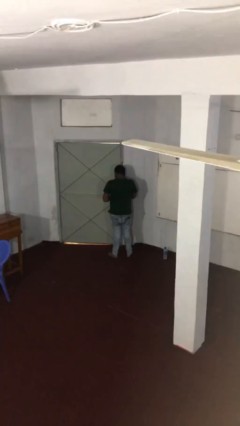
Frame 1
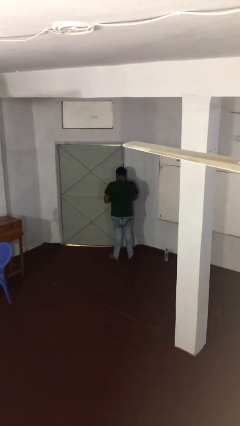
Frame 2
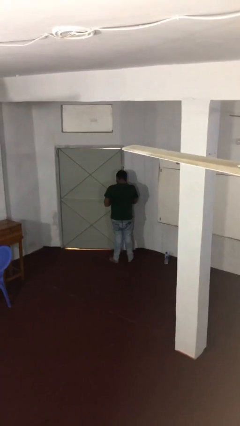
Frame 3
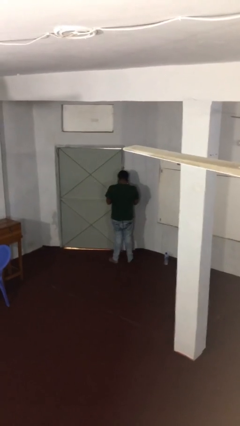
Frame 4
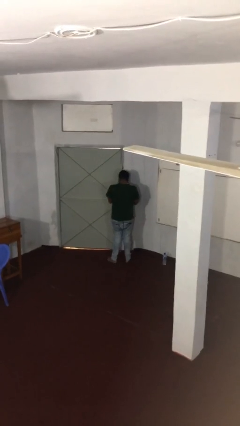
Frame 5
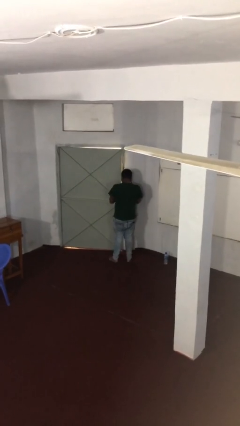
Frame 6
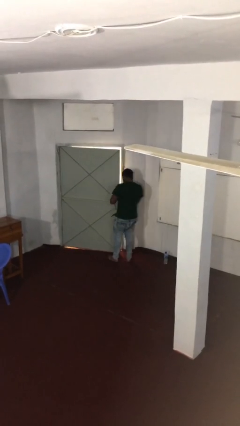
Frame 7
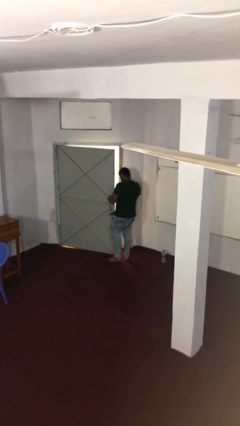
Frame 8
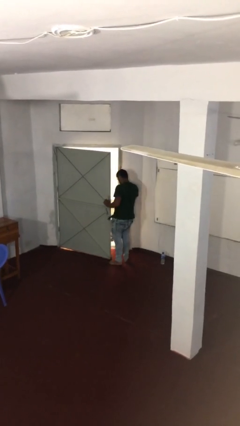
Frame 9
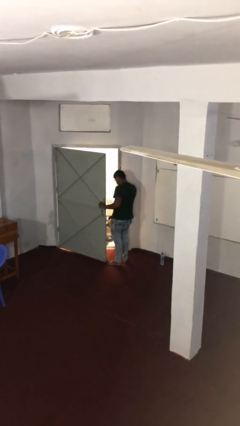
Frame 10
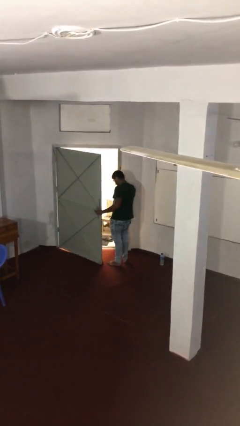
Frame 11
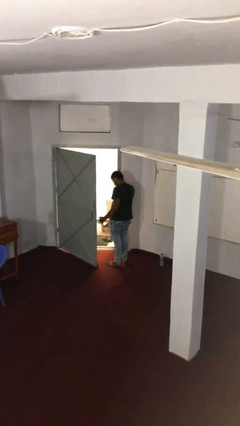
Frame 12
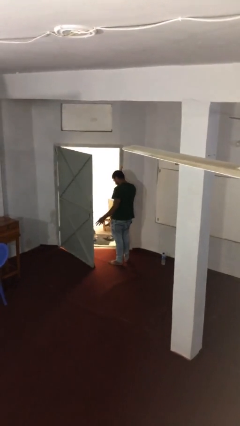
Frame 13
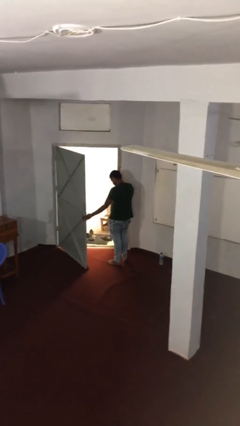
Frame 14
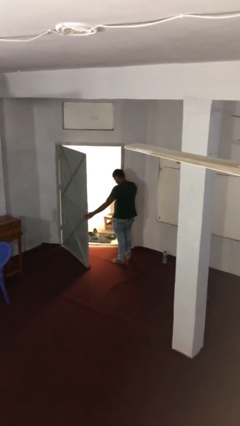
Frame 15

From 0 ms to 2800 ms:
person opens facility door

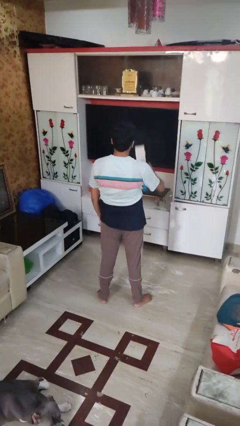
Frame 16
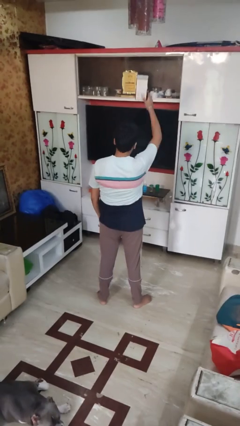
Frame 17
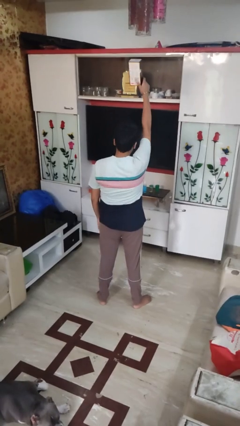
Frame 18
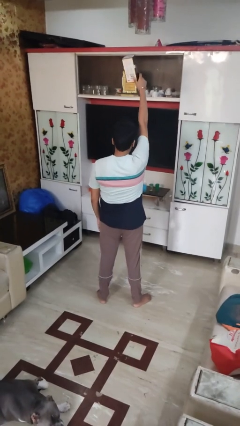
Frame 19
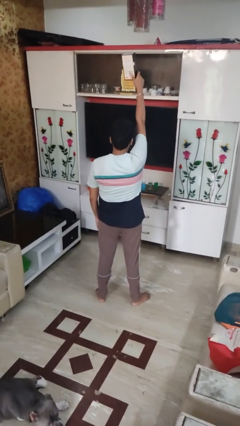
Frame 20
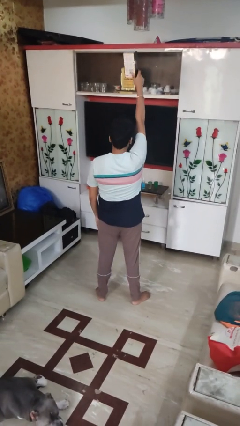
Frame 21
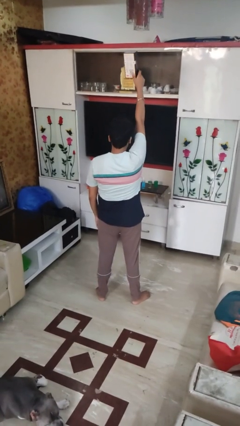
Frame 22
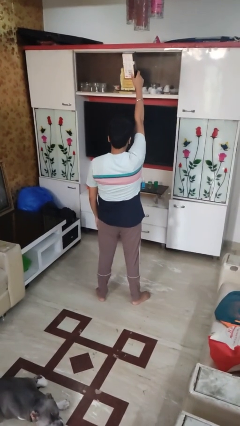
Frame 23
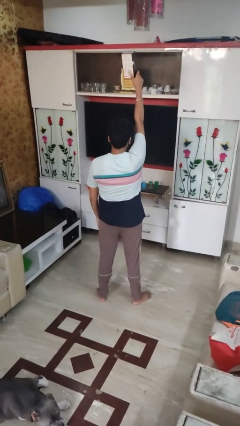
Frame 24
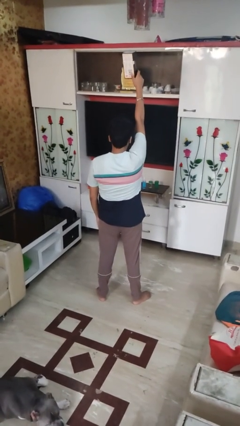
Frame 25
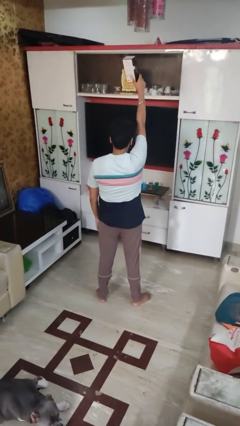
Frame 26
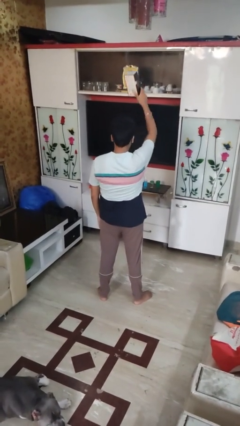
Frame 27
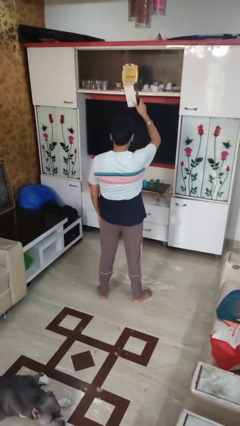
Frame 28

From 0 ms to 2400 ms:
person holds object above head

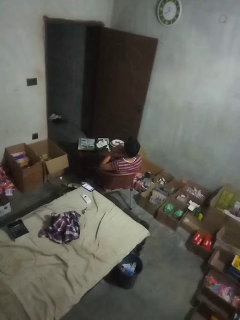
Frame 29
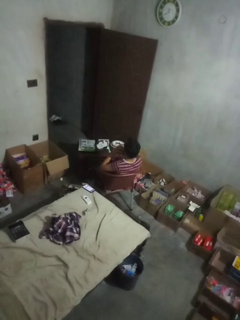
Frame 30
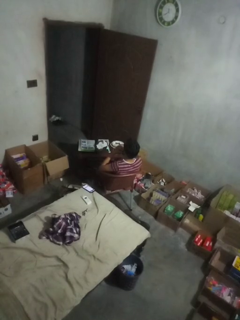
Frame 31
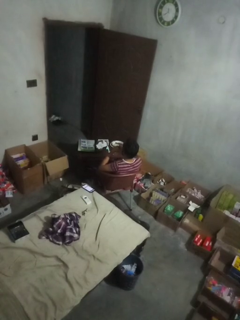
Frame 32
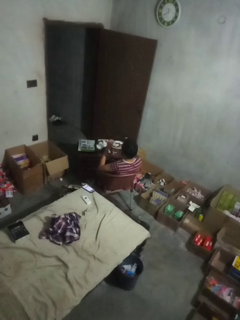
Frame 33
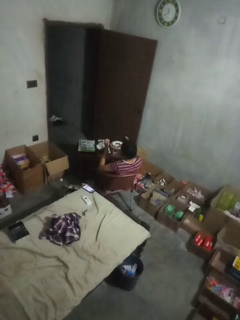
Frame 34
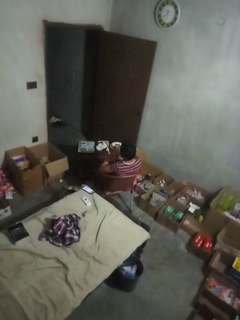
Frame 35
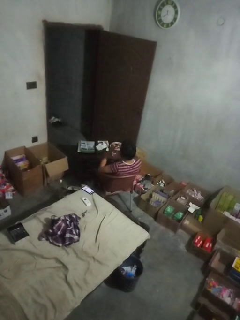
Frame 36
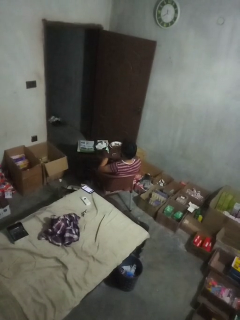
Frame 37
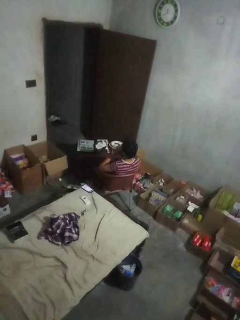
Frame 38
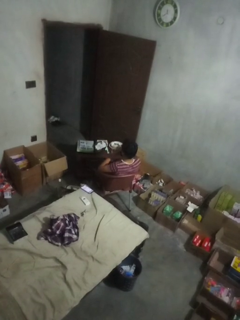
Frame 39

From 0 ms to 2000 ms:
person claps hands

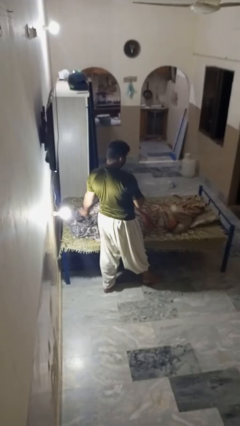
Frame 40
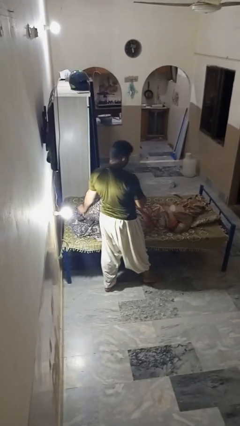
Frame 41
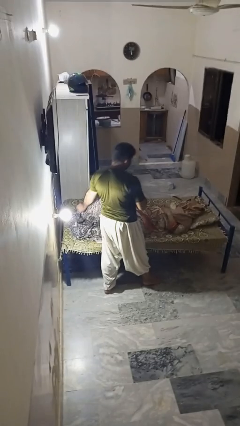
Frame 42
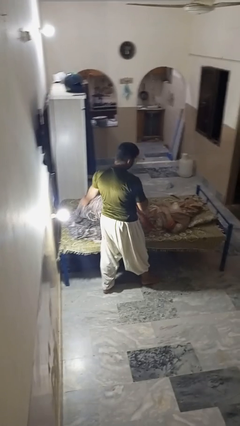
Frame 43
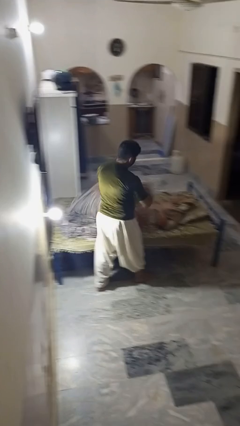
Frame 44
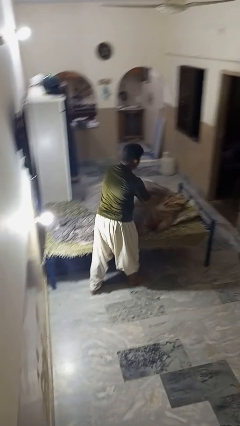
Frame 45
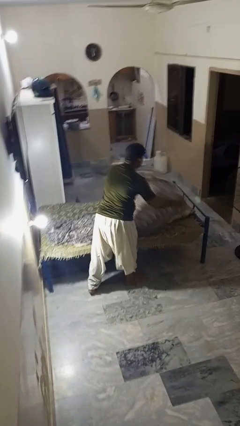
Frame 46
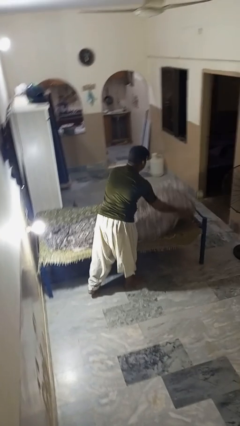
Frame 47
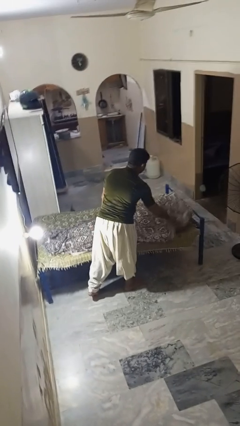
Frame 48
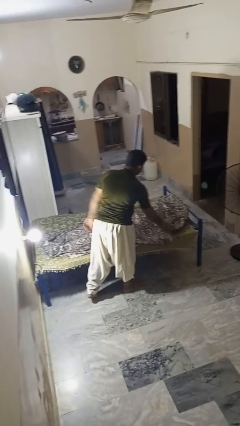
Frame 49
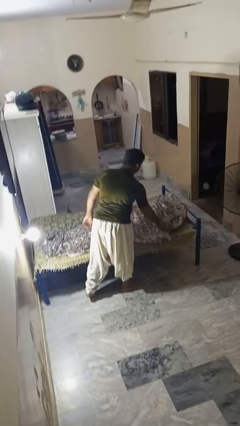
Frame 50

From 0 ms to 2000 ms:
person covers friend with blanket

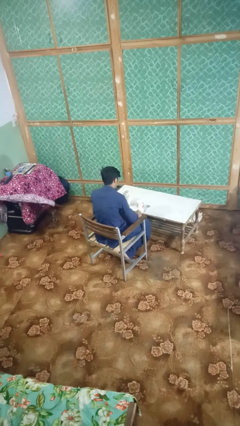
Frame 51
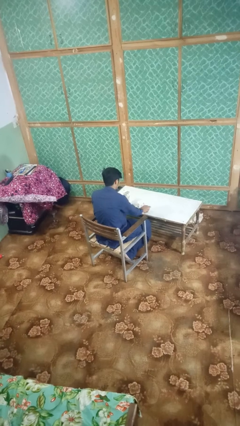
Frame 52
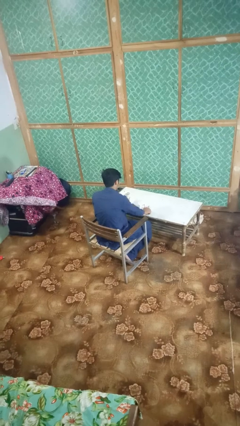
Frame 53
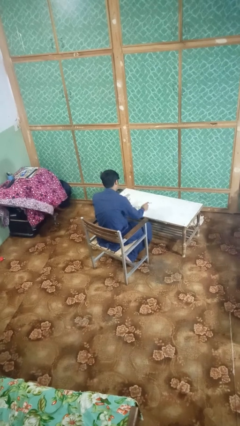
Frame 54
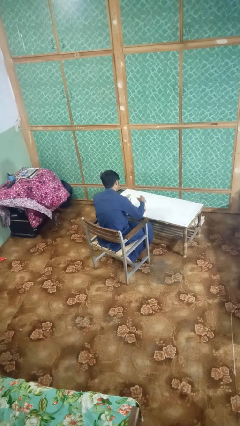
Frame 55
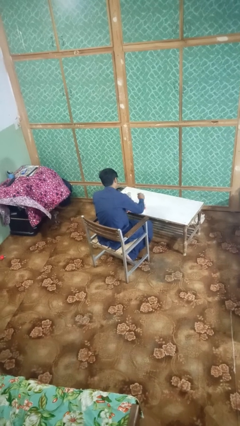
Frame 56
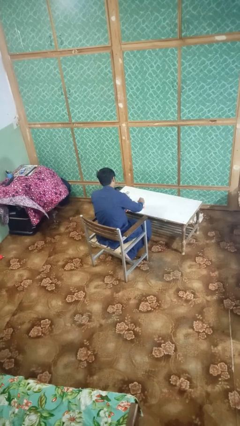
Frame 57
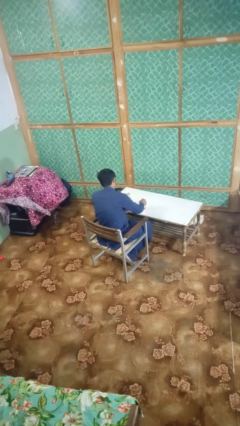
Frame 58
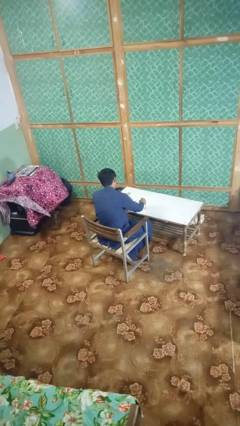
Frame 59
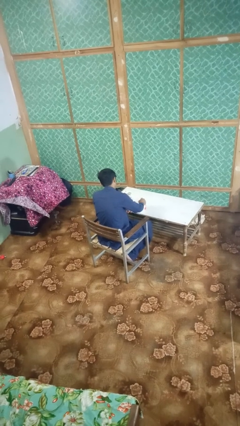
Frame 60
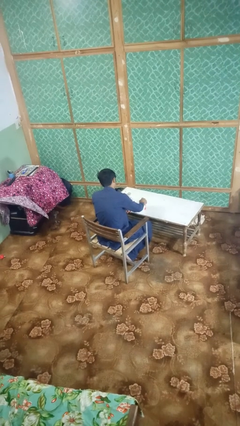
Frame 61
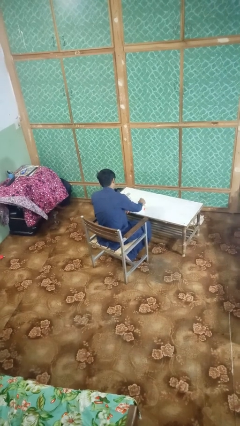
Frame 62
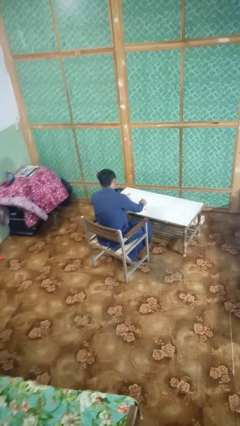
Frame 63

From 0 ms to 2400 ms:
person stirs mug

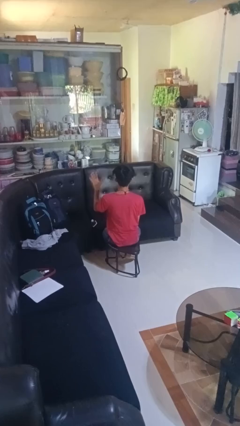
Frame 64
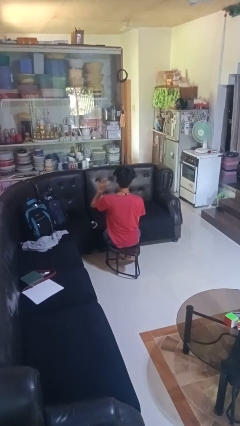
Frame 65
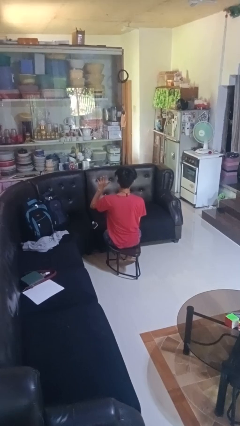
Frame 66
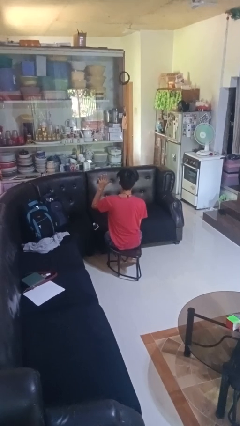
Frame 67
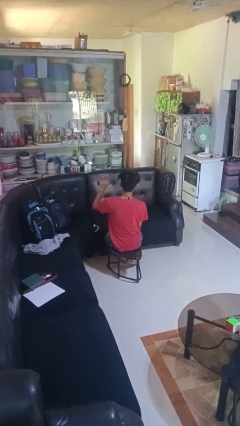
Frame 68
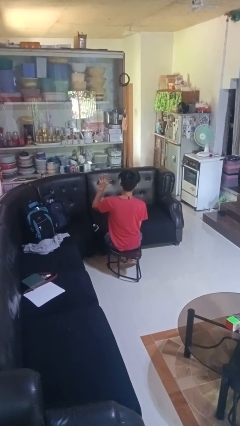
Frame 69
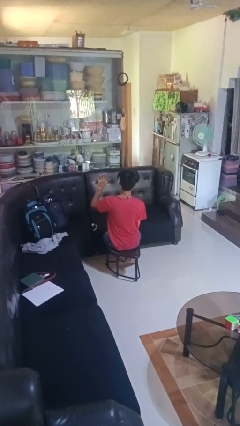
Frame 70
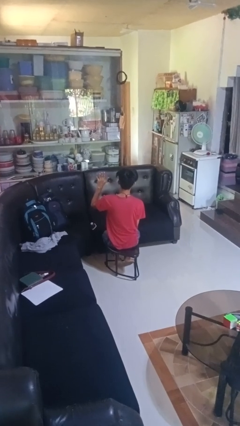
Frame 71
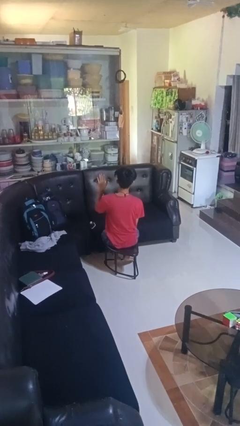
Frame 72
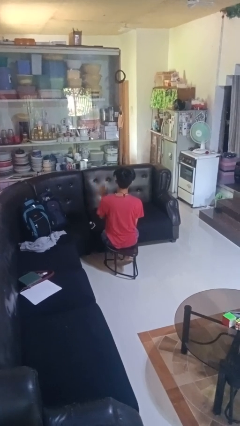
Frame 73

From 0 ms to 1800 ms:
person gestures number five

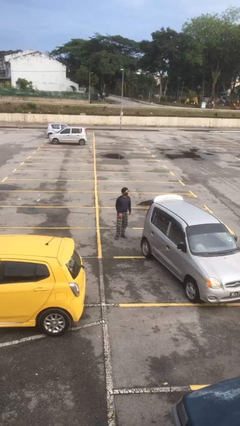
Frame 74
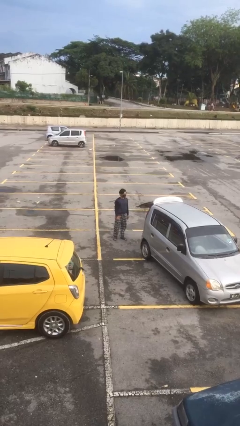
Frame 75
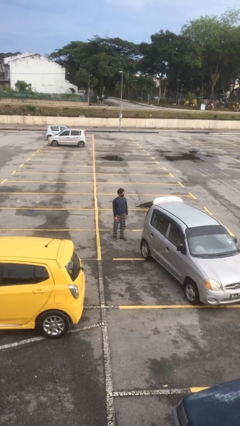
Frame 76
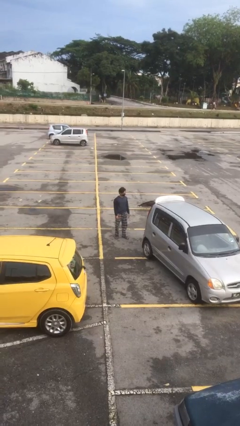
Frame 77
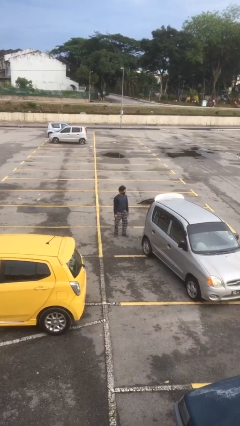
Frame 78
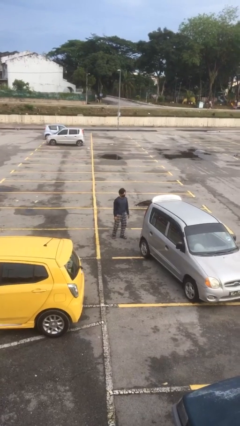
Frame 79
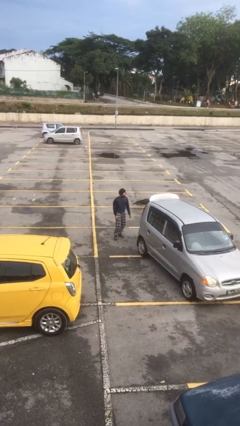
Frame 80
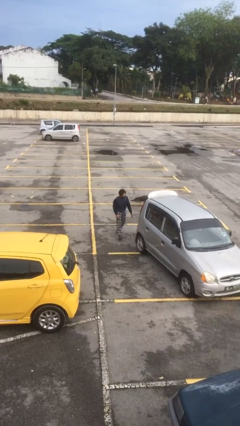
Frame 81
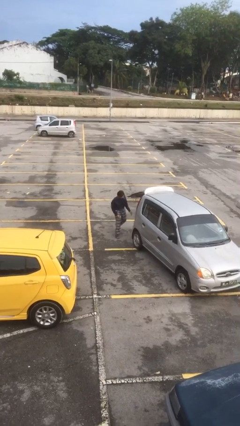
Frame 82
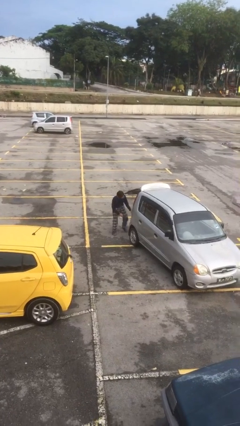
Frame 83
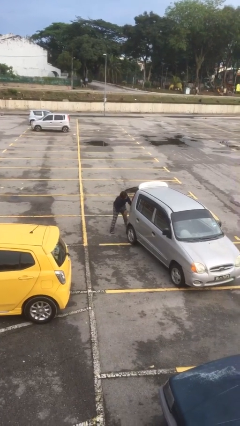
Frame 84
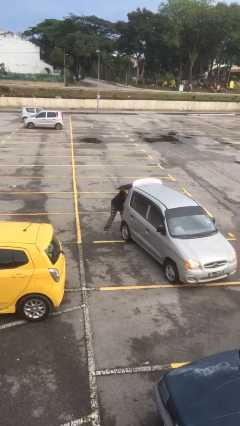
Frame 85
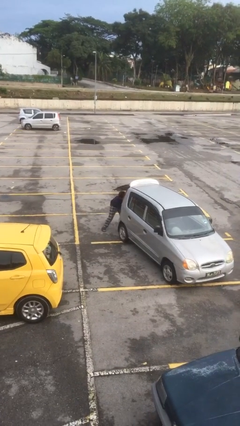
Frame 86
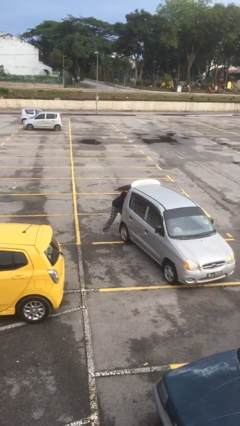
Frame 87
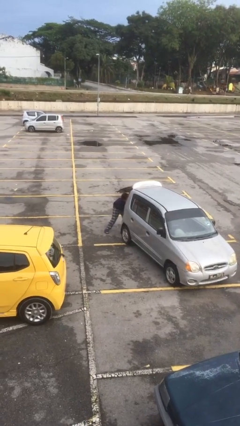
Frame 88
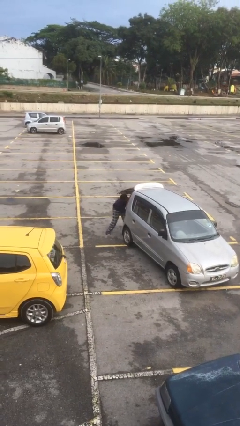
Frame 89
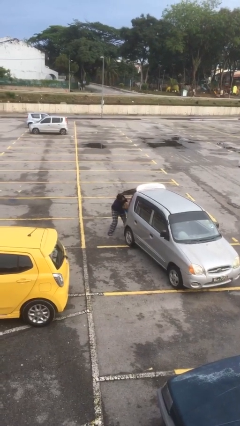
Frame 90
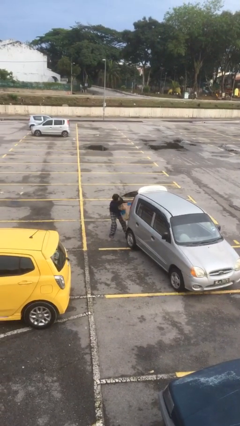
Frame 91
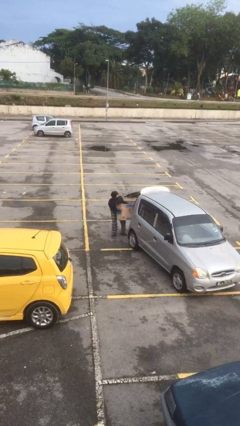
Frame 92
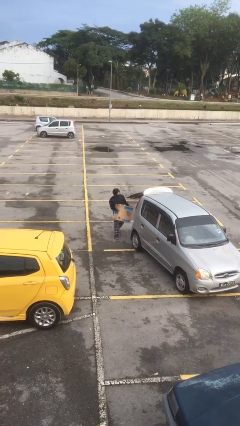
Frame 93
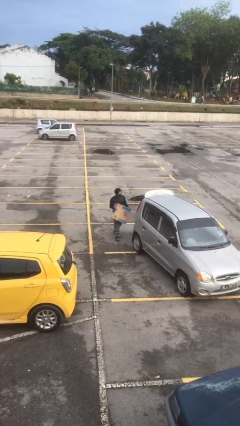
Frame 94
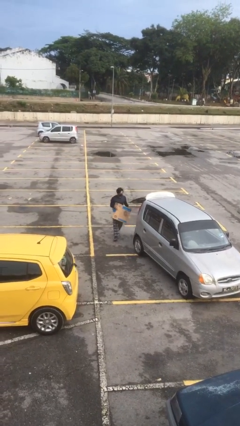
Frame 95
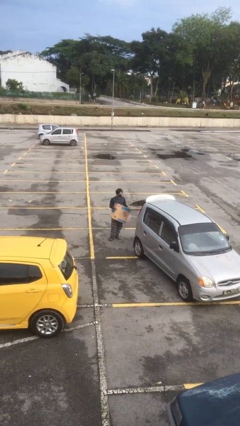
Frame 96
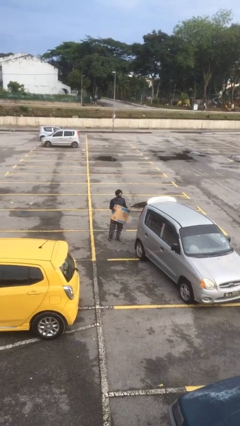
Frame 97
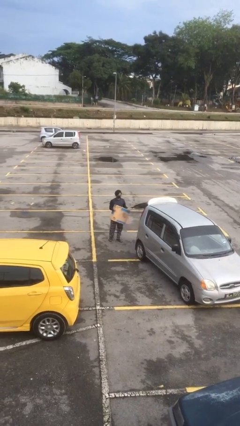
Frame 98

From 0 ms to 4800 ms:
person unloads car
